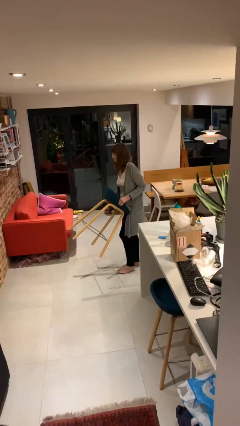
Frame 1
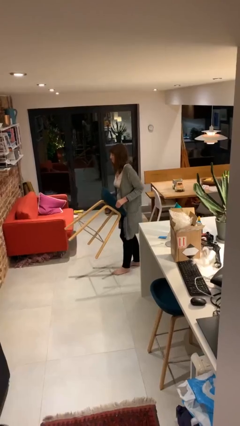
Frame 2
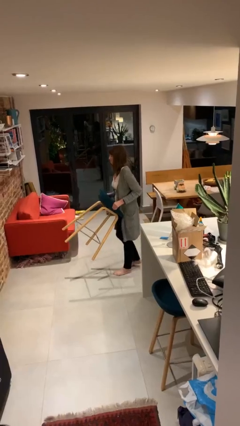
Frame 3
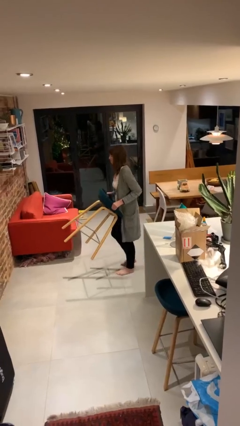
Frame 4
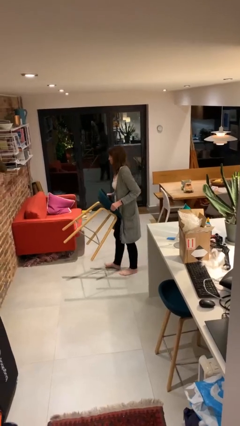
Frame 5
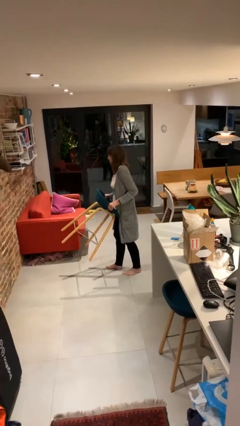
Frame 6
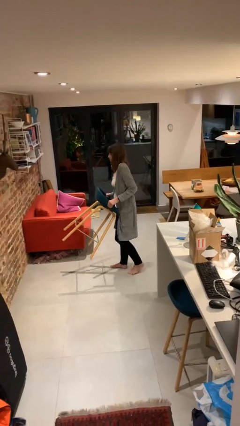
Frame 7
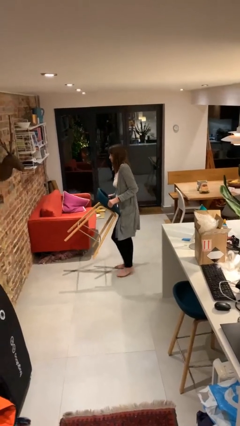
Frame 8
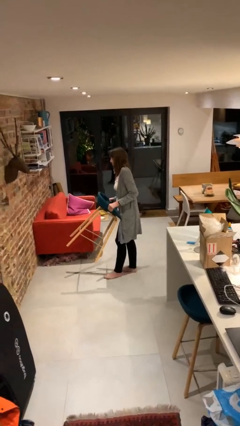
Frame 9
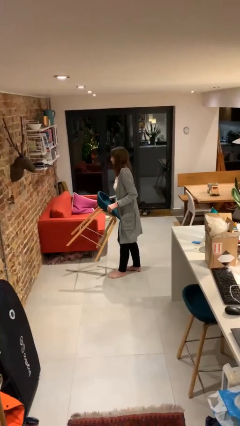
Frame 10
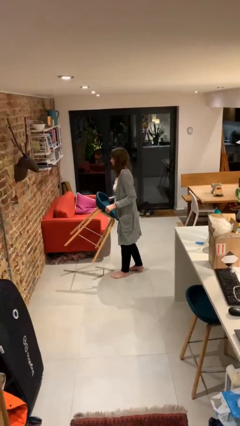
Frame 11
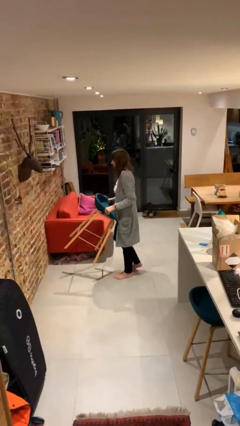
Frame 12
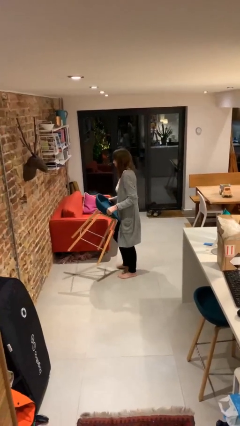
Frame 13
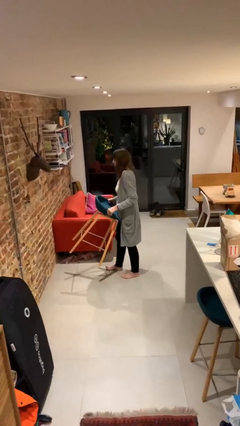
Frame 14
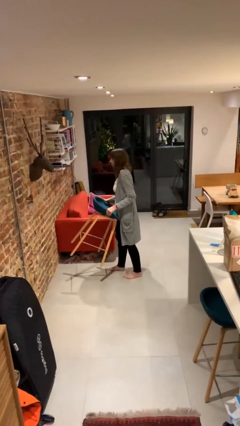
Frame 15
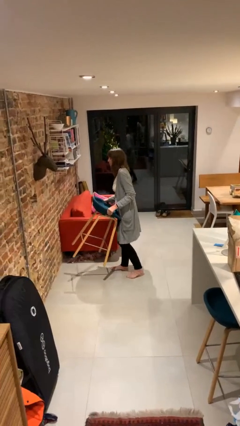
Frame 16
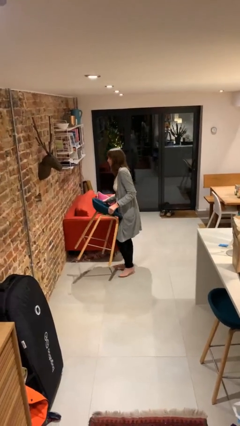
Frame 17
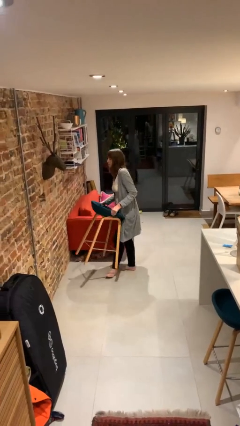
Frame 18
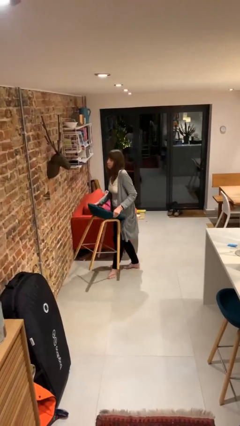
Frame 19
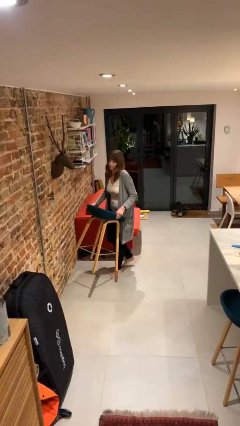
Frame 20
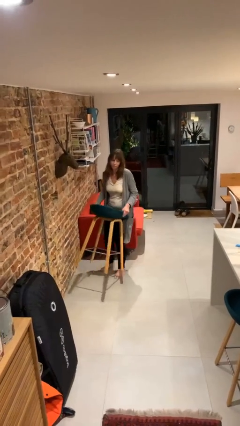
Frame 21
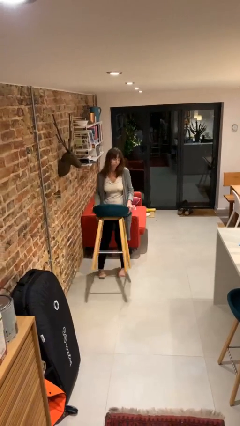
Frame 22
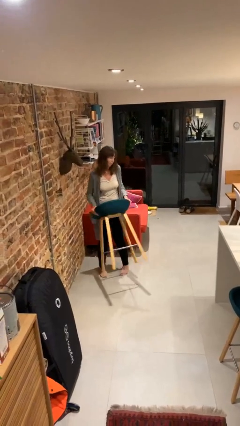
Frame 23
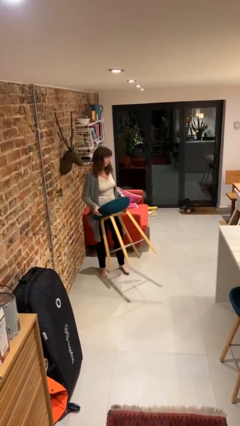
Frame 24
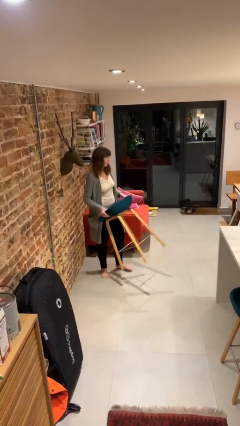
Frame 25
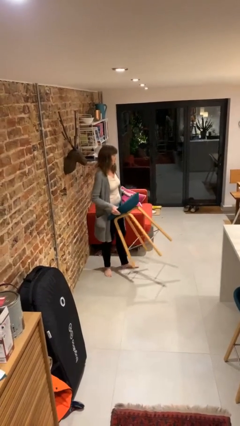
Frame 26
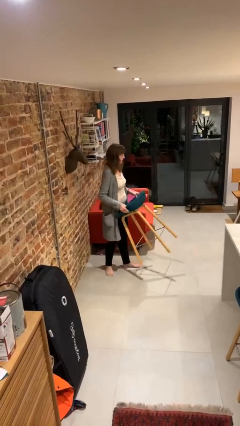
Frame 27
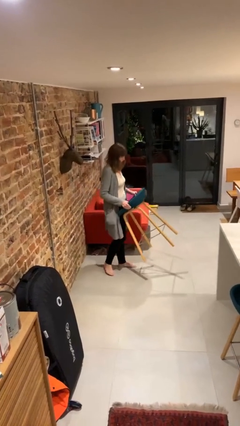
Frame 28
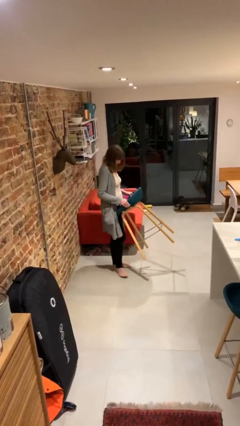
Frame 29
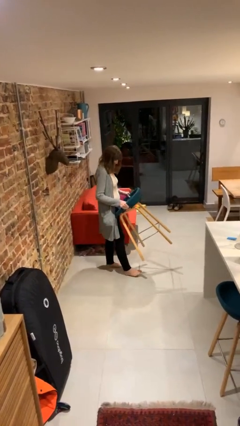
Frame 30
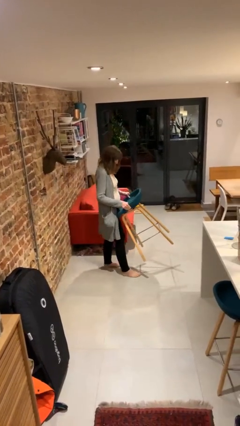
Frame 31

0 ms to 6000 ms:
person carries heavy object

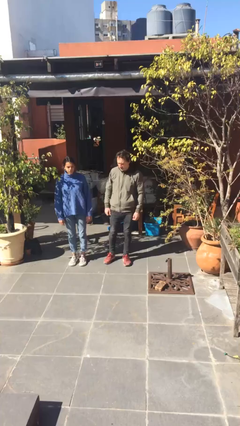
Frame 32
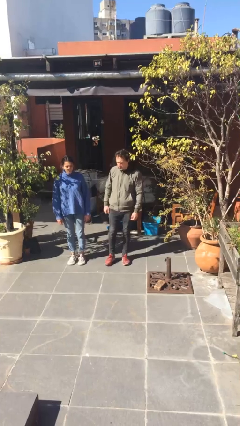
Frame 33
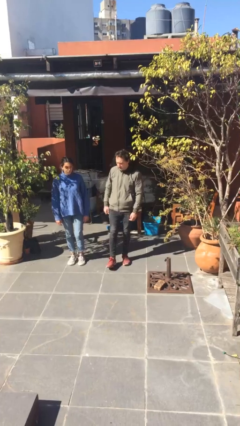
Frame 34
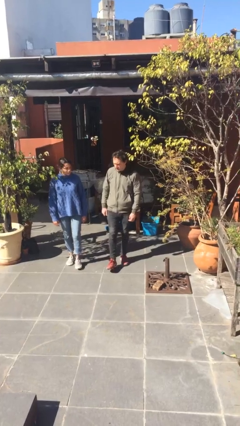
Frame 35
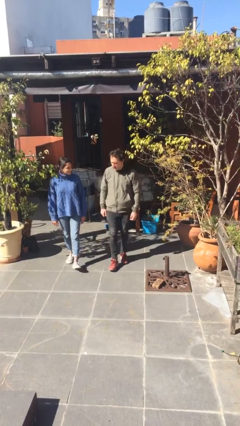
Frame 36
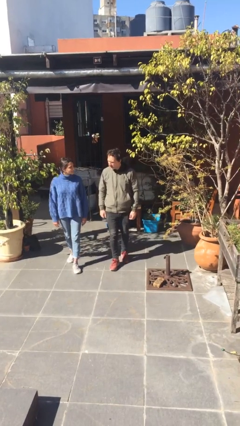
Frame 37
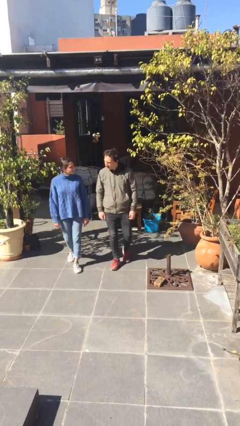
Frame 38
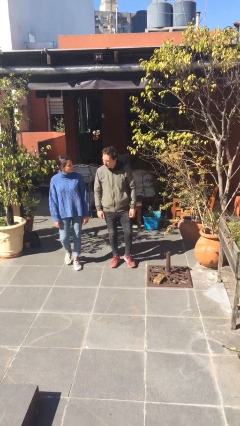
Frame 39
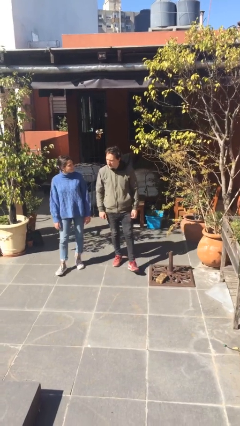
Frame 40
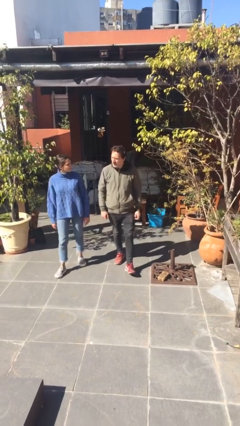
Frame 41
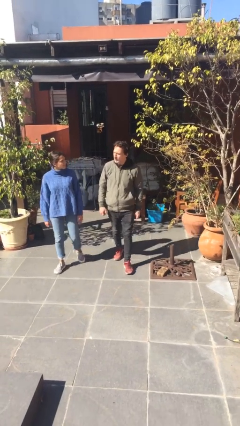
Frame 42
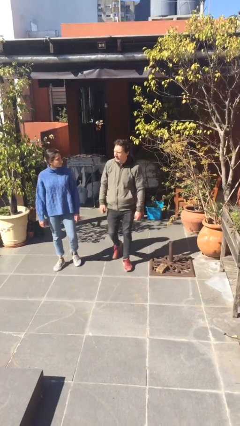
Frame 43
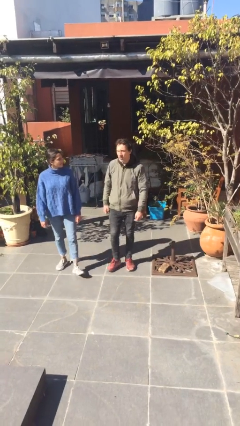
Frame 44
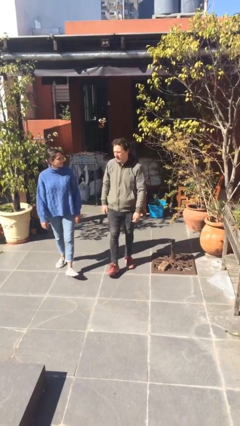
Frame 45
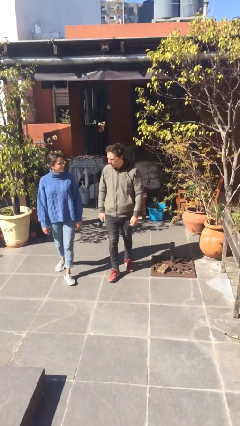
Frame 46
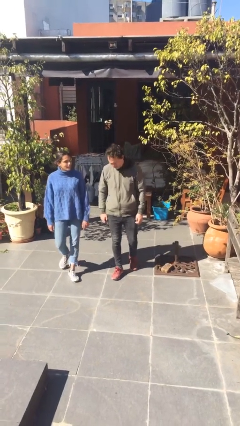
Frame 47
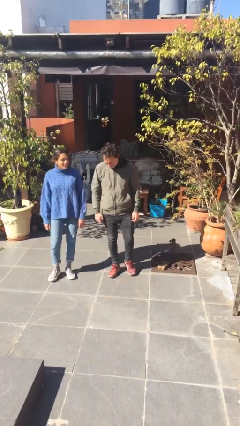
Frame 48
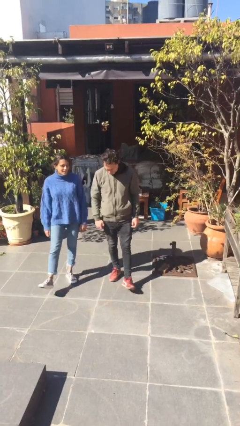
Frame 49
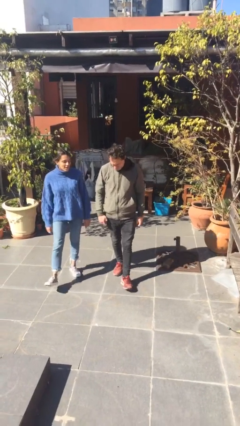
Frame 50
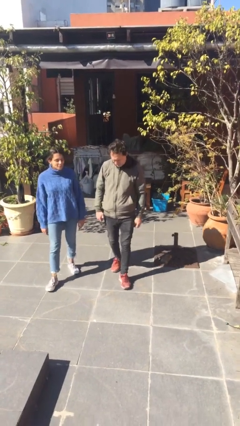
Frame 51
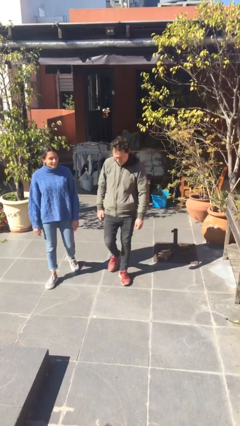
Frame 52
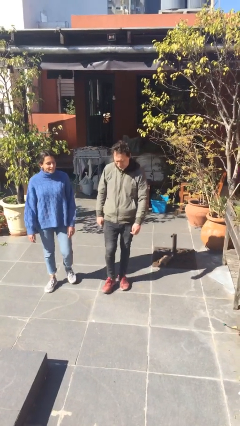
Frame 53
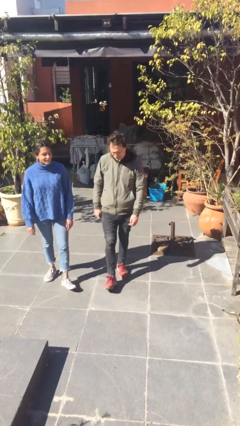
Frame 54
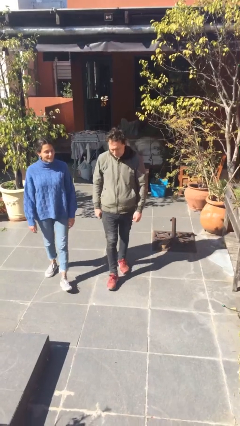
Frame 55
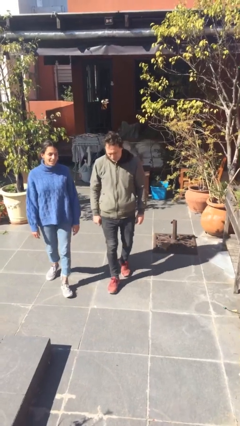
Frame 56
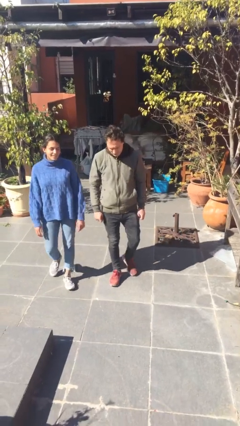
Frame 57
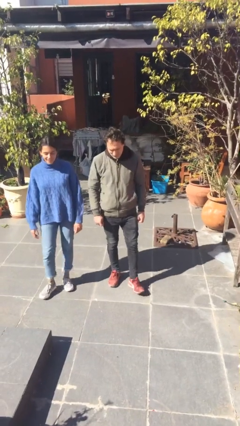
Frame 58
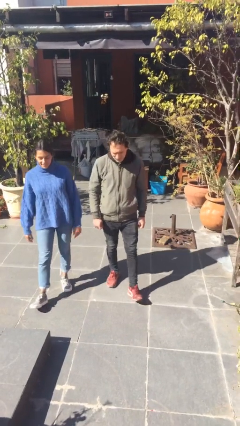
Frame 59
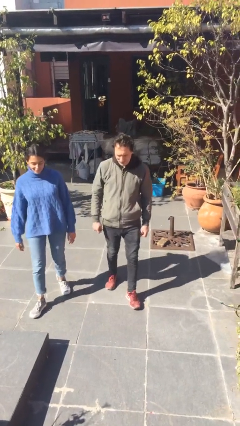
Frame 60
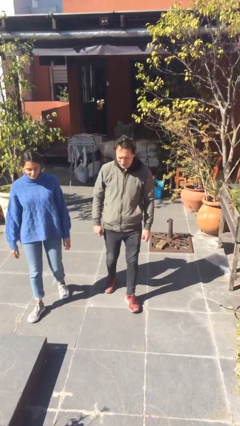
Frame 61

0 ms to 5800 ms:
person talks to person

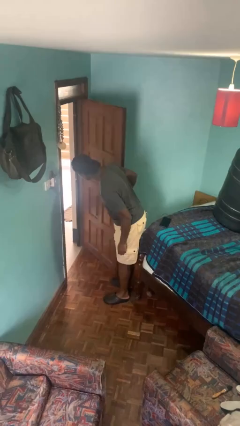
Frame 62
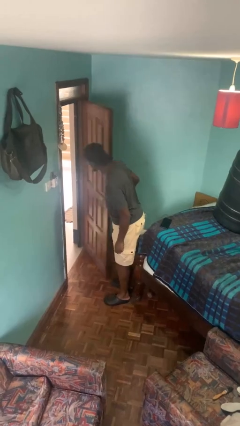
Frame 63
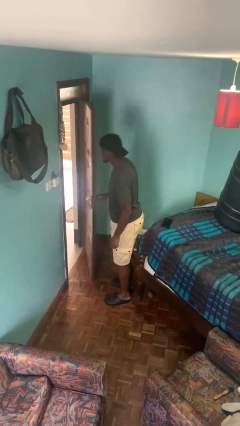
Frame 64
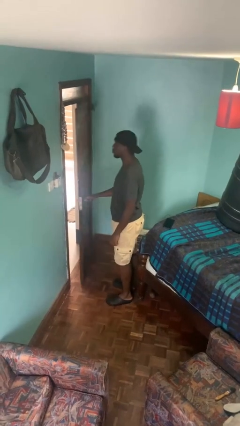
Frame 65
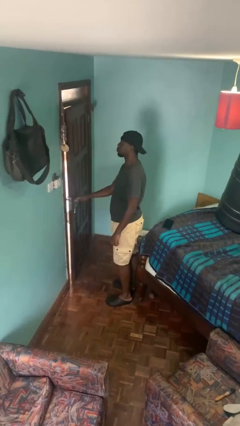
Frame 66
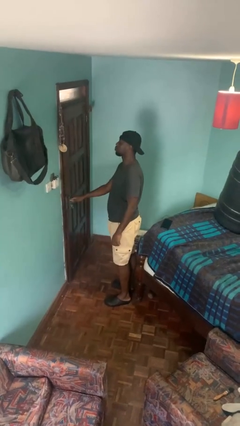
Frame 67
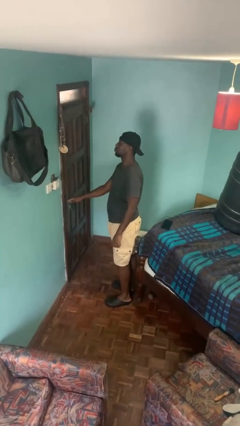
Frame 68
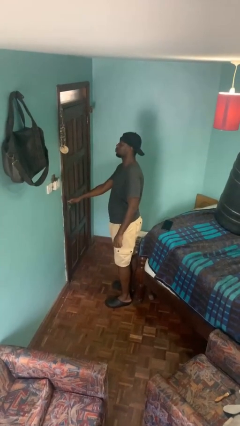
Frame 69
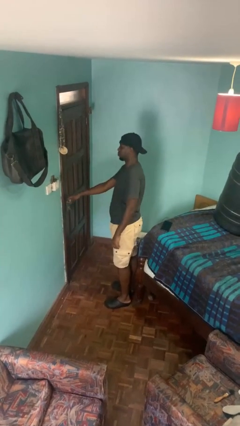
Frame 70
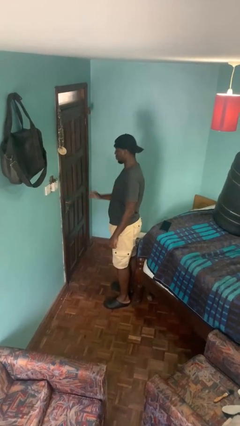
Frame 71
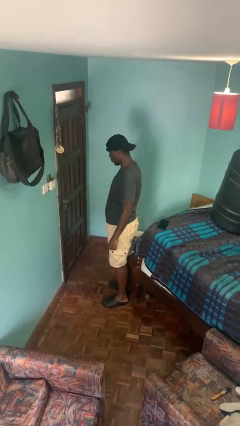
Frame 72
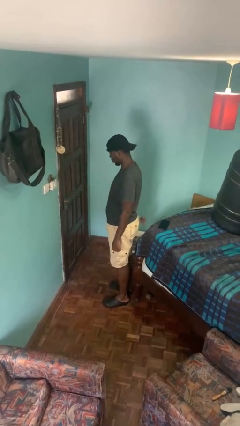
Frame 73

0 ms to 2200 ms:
person closes facility door

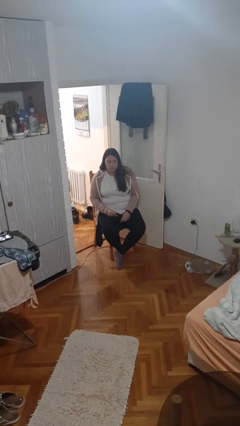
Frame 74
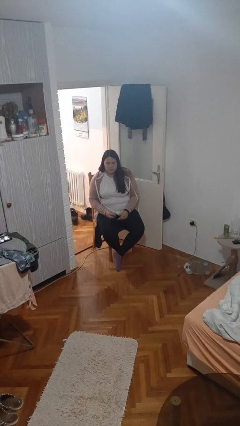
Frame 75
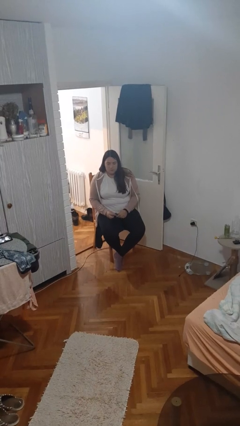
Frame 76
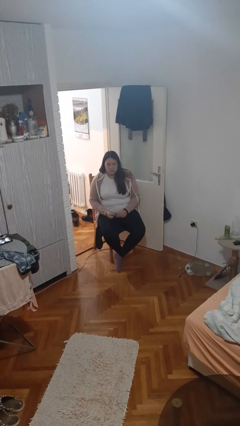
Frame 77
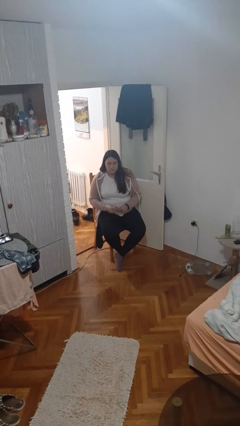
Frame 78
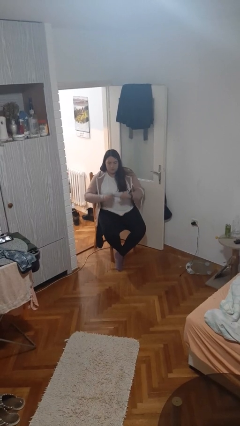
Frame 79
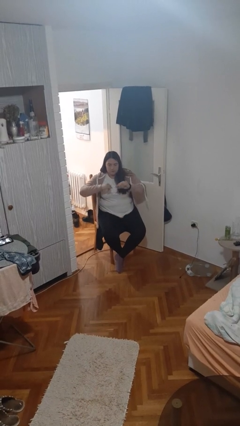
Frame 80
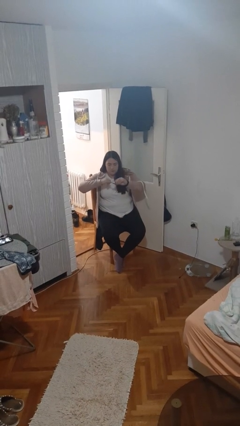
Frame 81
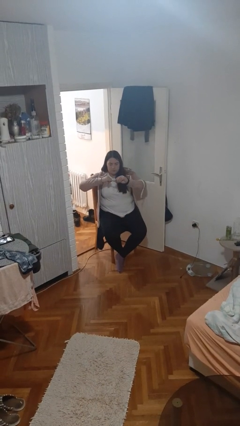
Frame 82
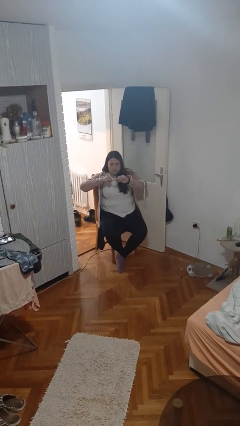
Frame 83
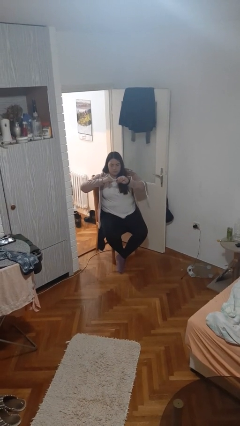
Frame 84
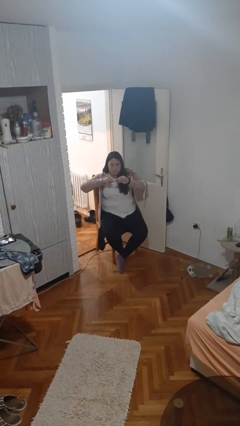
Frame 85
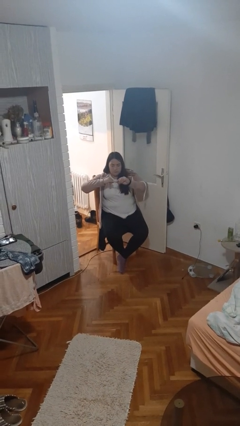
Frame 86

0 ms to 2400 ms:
person clips fingernails

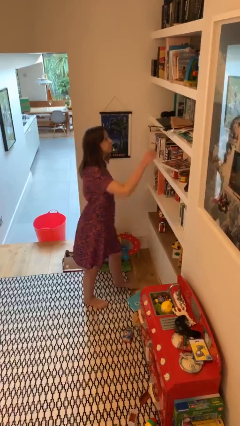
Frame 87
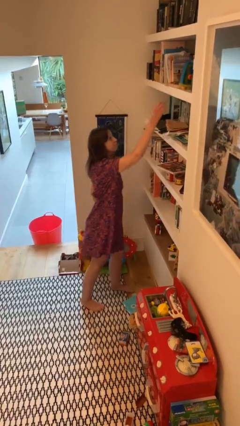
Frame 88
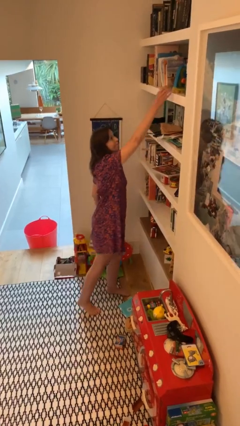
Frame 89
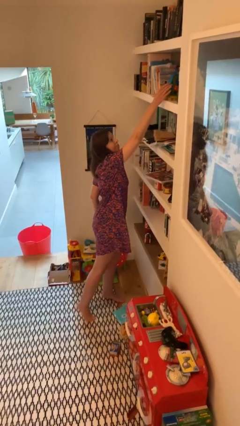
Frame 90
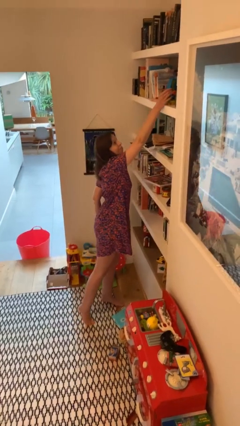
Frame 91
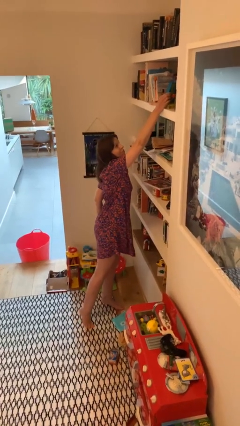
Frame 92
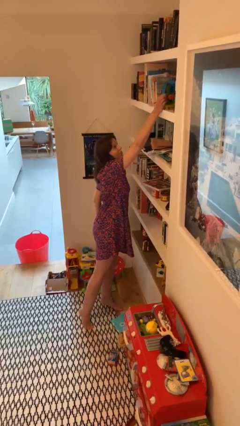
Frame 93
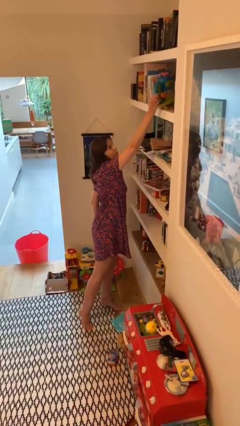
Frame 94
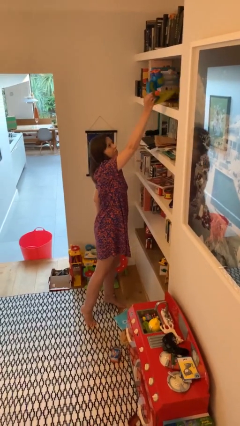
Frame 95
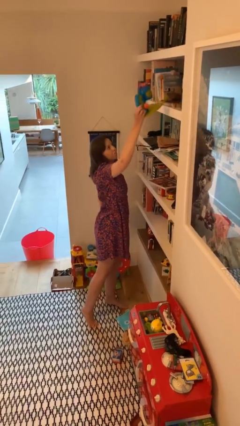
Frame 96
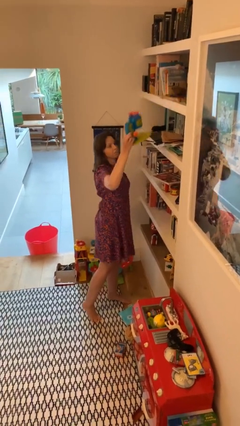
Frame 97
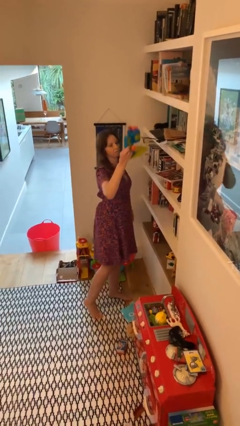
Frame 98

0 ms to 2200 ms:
person picks up object from shelf
